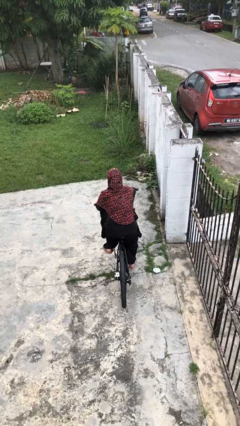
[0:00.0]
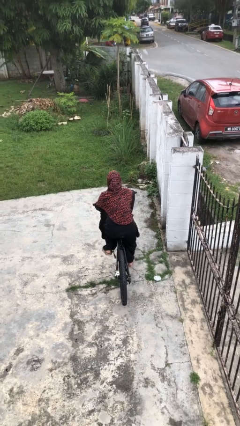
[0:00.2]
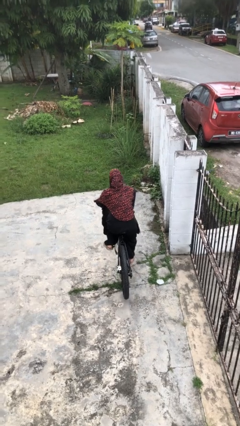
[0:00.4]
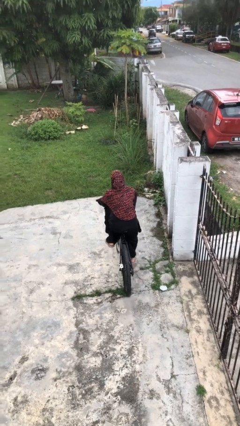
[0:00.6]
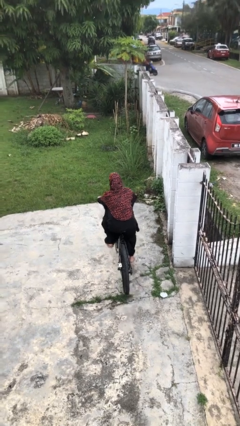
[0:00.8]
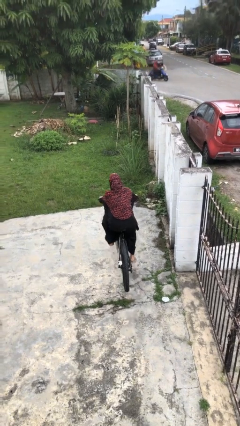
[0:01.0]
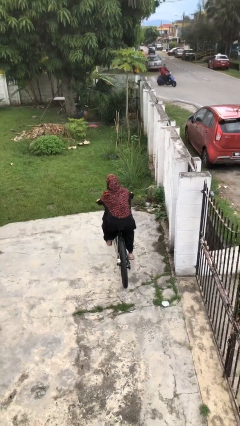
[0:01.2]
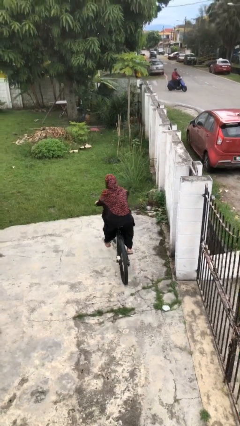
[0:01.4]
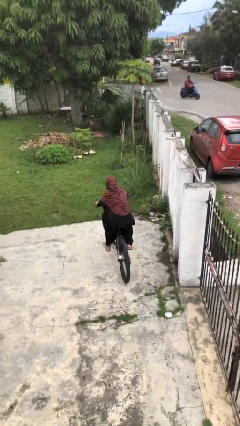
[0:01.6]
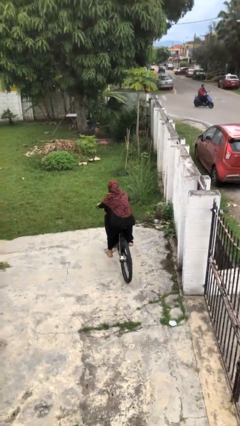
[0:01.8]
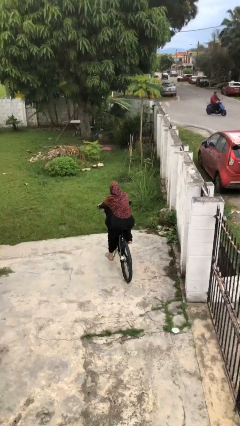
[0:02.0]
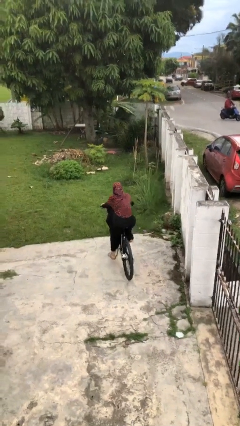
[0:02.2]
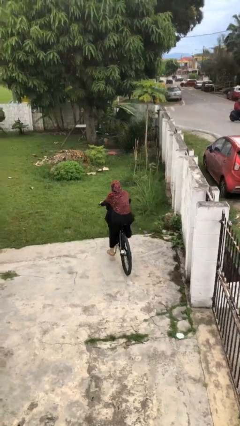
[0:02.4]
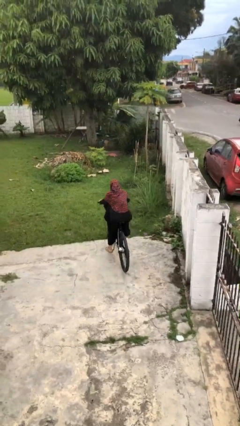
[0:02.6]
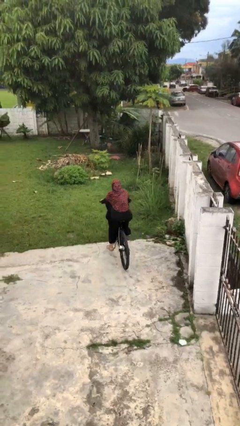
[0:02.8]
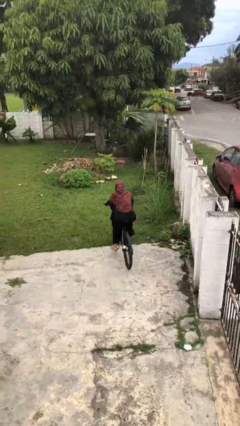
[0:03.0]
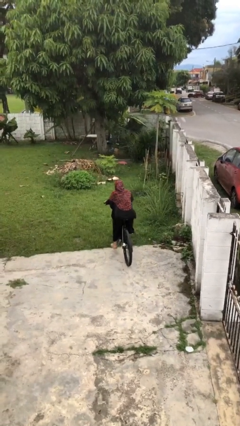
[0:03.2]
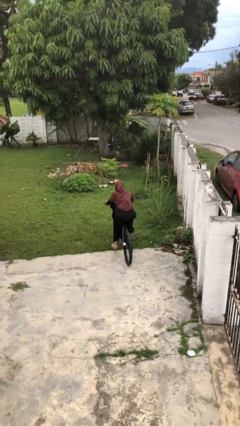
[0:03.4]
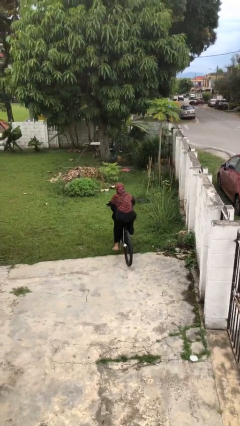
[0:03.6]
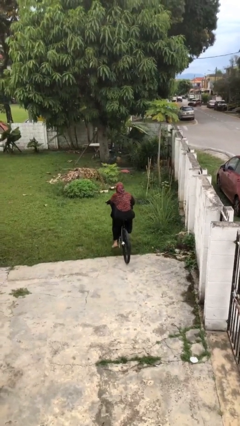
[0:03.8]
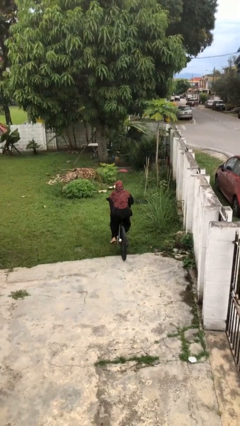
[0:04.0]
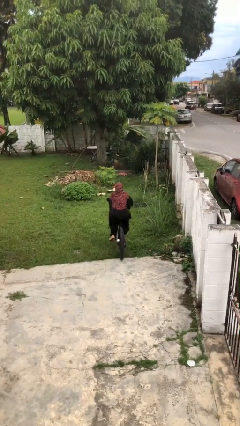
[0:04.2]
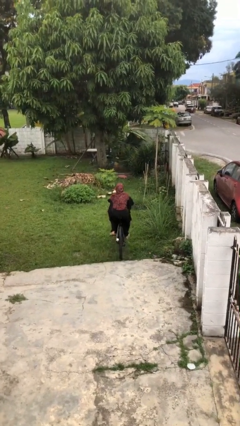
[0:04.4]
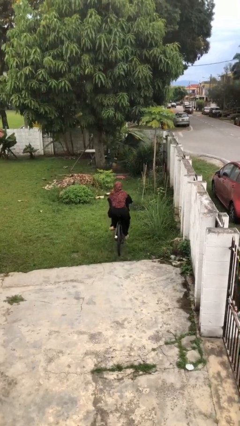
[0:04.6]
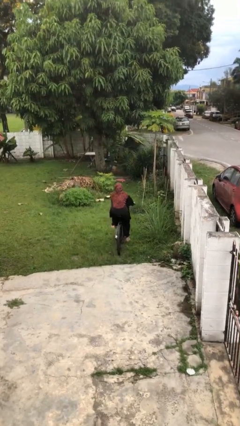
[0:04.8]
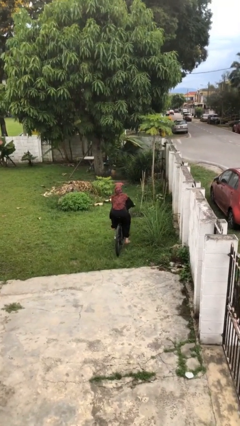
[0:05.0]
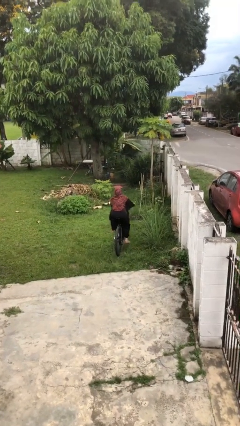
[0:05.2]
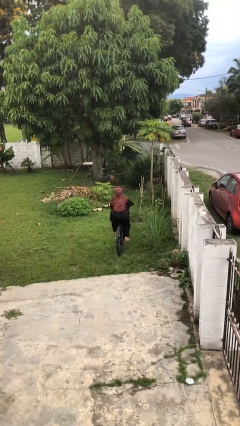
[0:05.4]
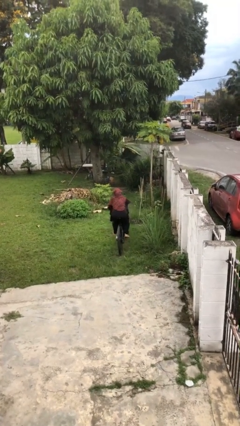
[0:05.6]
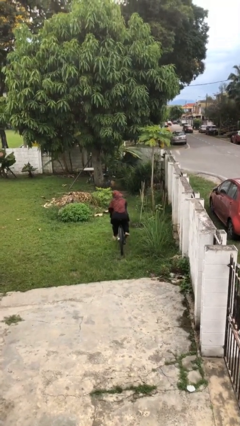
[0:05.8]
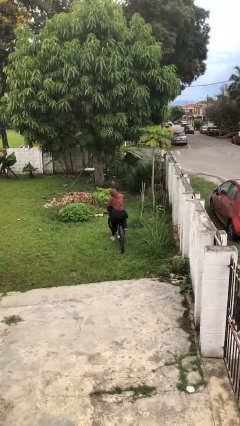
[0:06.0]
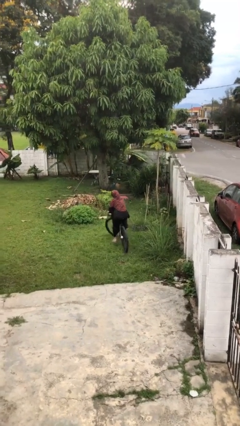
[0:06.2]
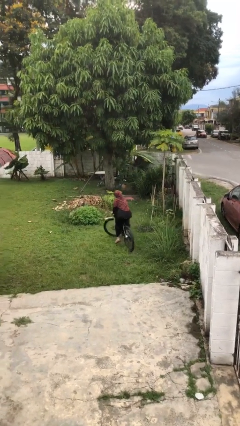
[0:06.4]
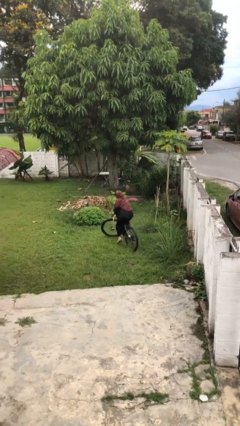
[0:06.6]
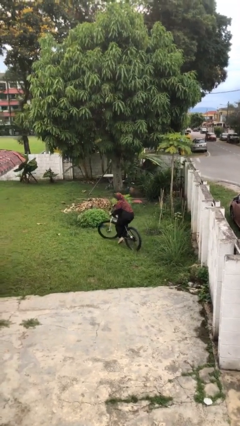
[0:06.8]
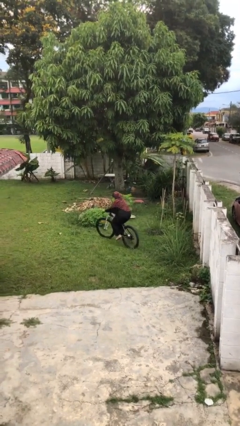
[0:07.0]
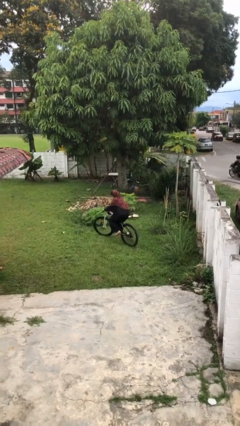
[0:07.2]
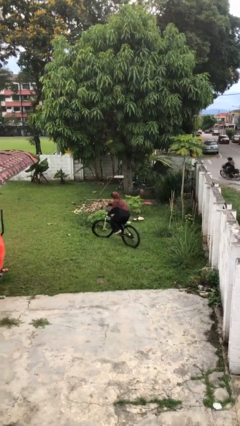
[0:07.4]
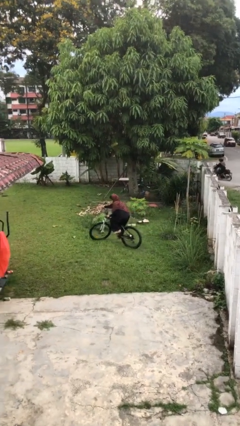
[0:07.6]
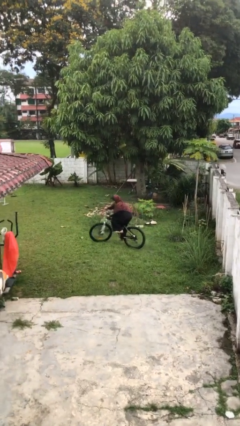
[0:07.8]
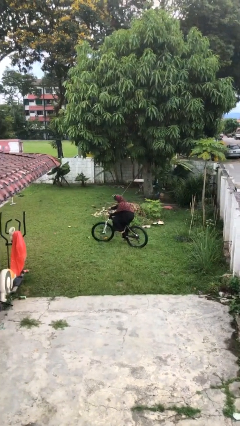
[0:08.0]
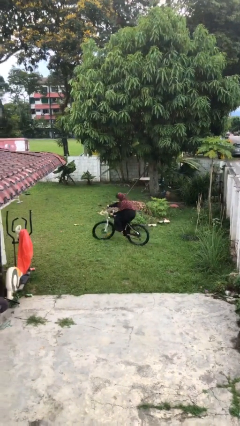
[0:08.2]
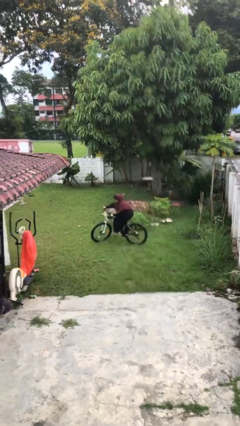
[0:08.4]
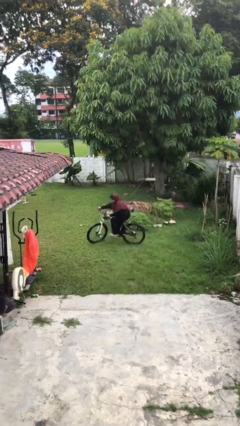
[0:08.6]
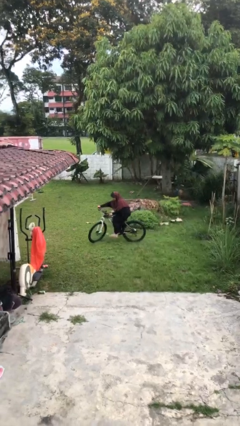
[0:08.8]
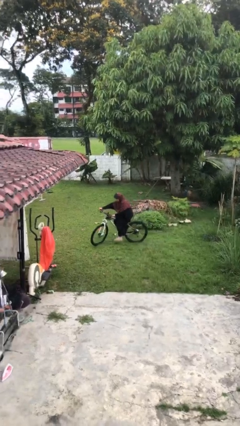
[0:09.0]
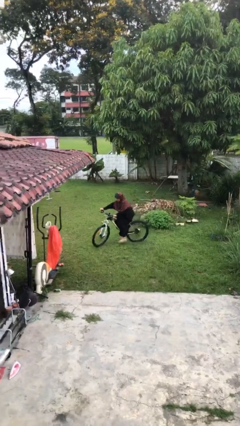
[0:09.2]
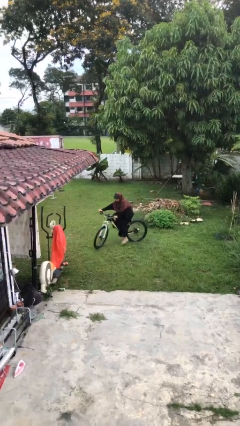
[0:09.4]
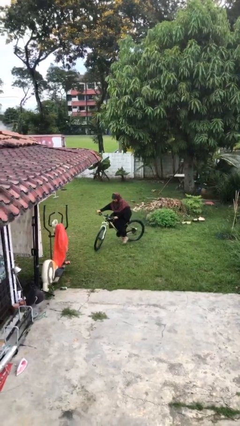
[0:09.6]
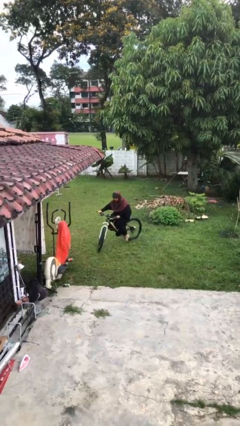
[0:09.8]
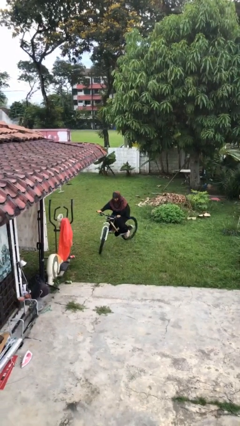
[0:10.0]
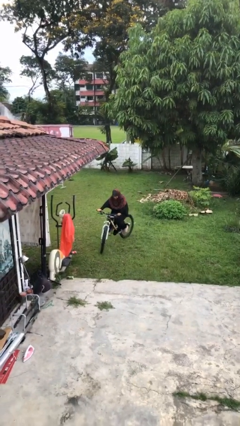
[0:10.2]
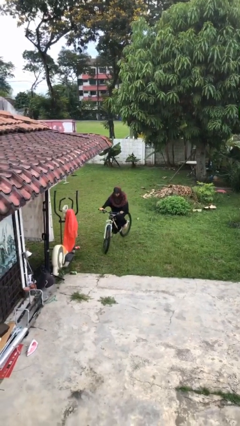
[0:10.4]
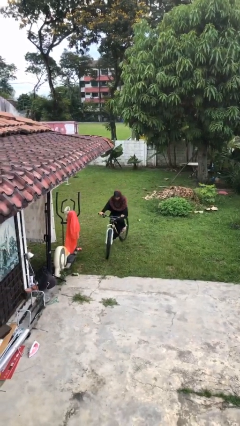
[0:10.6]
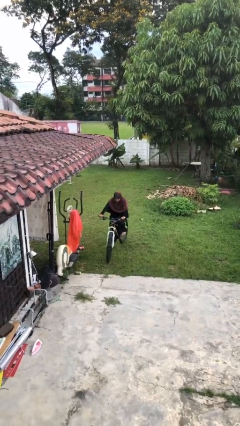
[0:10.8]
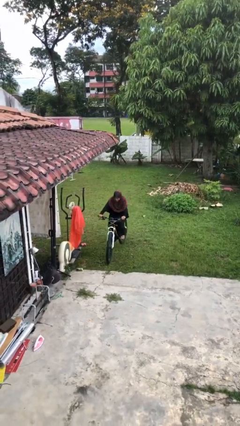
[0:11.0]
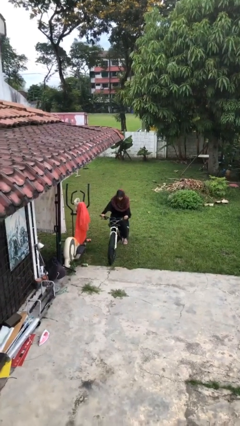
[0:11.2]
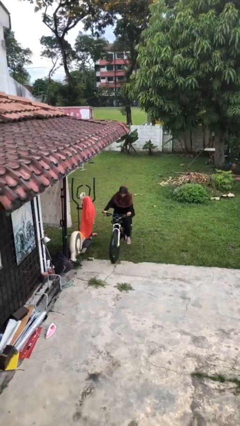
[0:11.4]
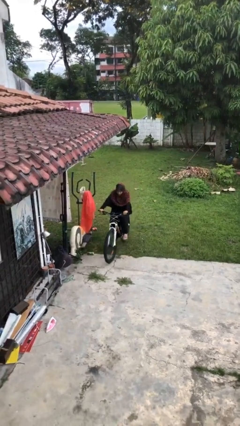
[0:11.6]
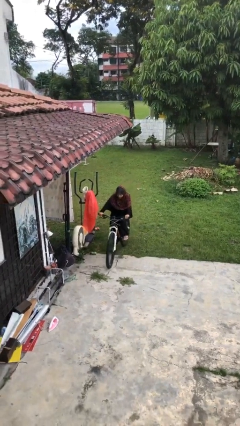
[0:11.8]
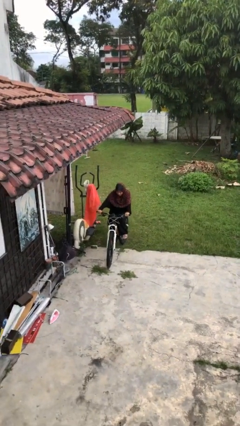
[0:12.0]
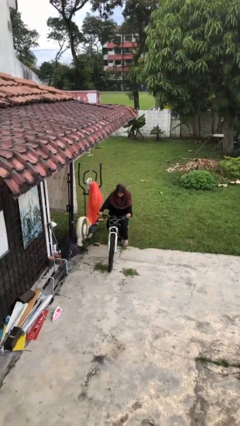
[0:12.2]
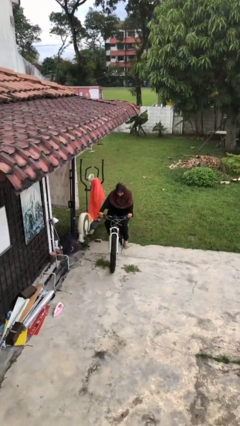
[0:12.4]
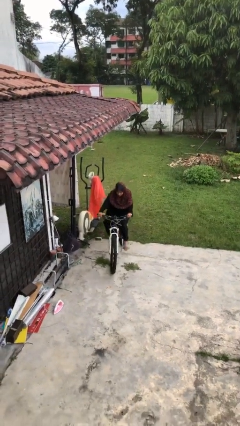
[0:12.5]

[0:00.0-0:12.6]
person rides bicycle

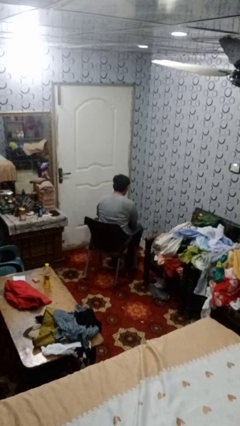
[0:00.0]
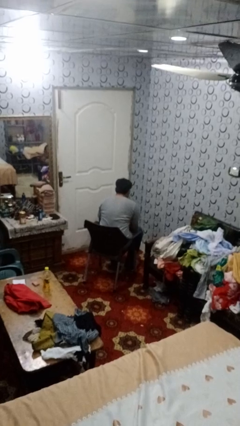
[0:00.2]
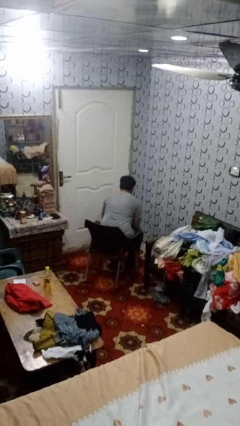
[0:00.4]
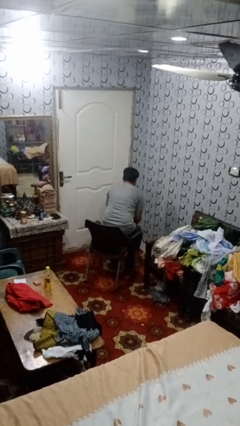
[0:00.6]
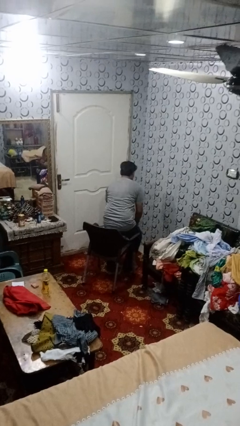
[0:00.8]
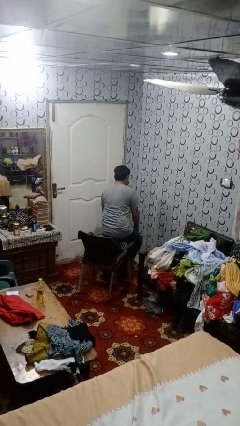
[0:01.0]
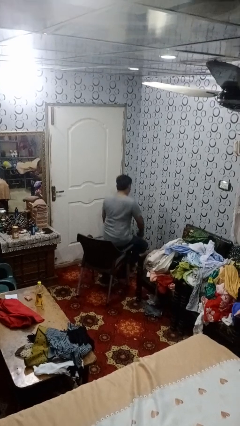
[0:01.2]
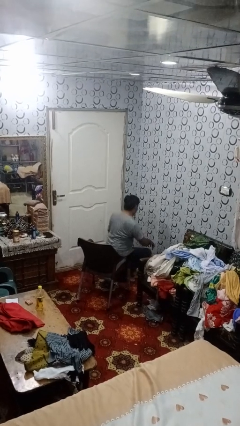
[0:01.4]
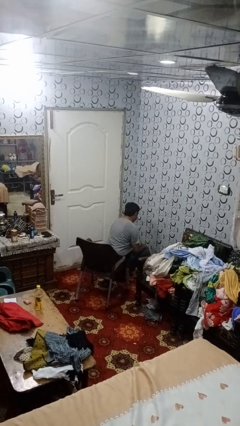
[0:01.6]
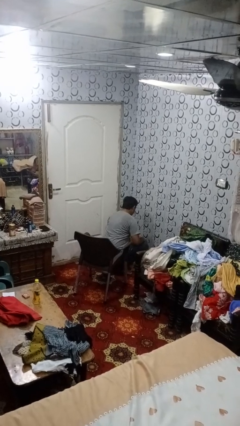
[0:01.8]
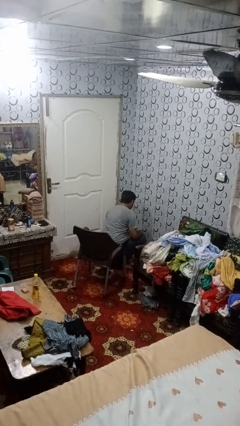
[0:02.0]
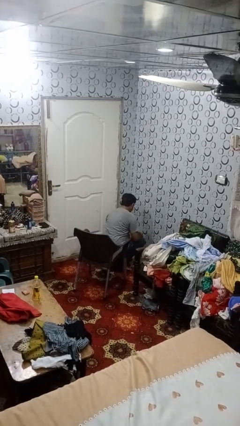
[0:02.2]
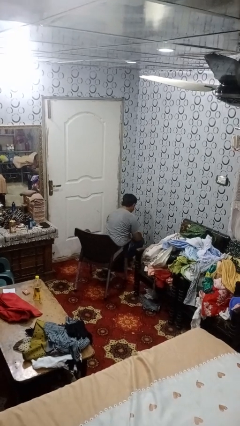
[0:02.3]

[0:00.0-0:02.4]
person falls from chair

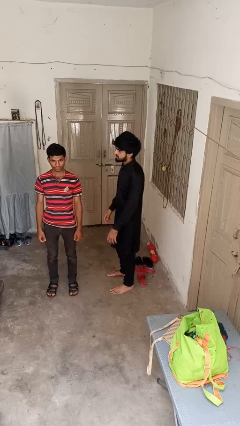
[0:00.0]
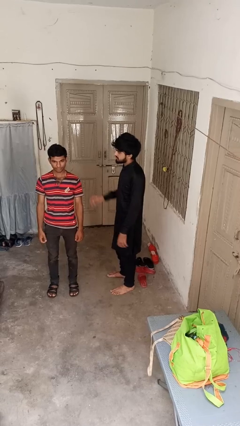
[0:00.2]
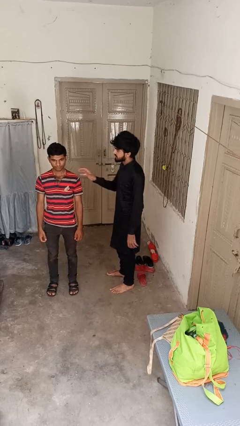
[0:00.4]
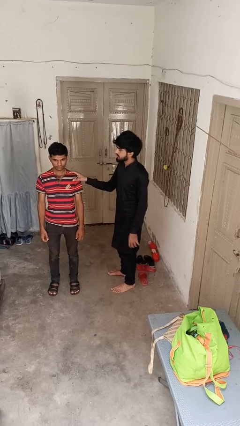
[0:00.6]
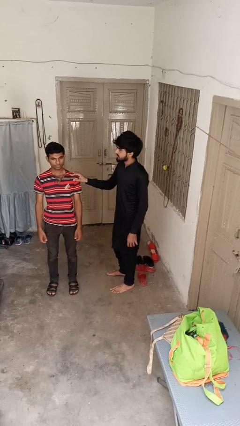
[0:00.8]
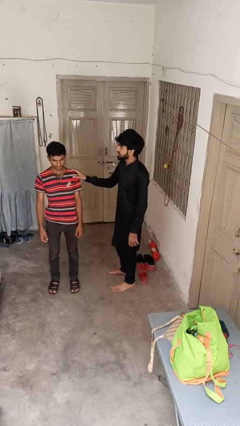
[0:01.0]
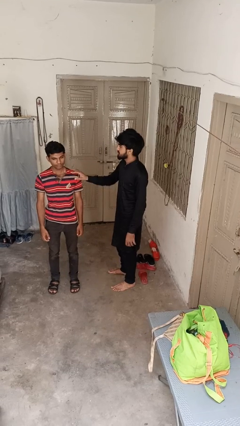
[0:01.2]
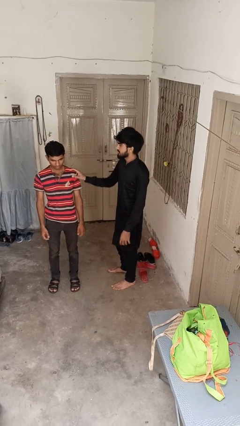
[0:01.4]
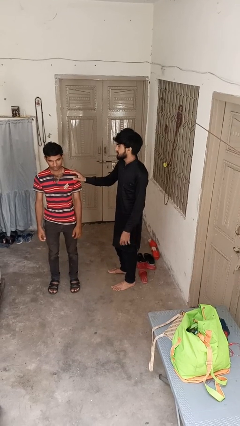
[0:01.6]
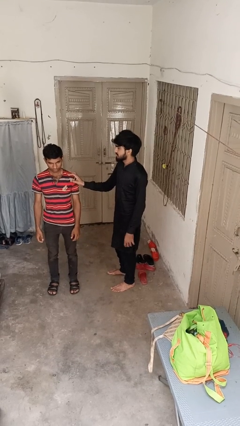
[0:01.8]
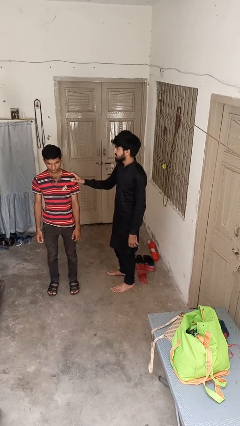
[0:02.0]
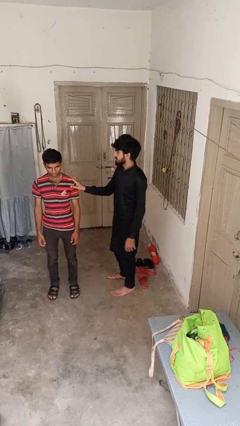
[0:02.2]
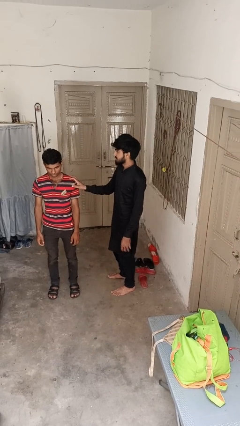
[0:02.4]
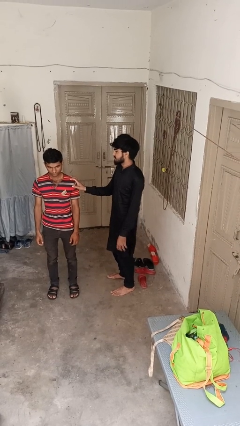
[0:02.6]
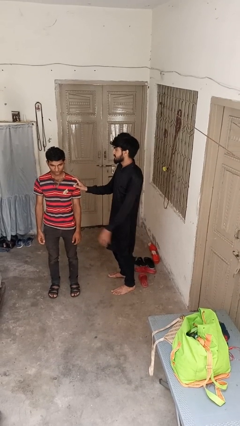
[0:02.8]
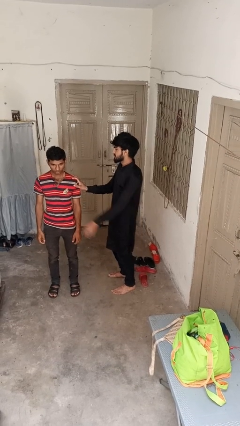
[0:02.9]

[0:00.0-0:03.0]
person grabs person by shoulder
